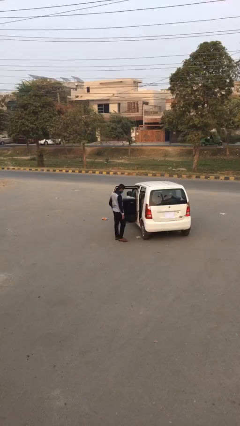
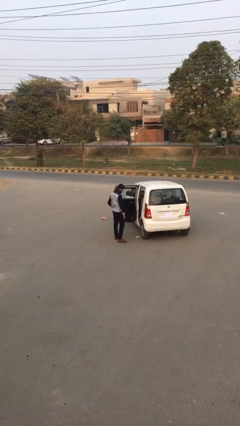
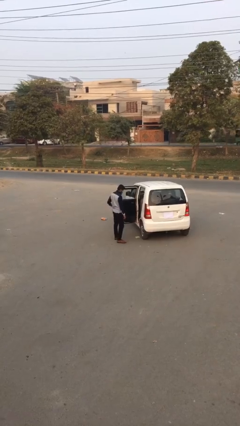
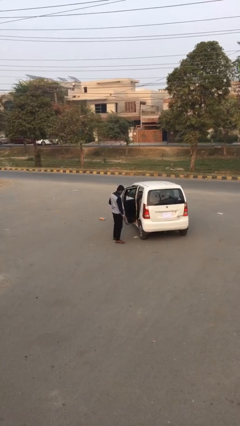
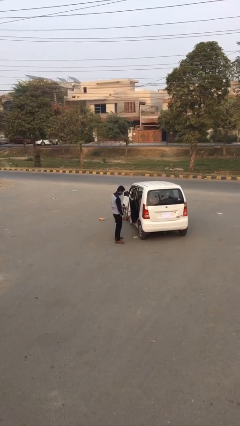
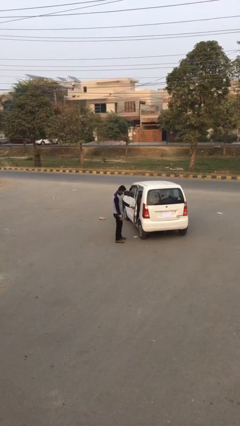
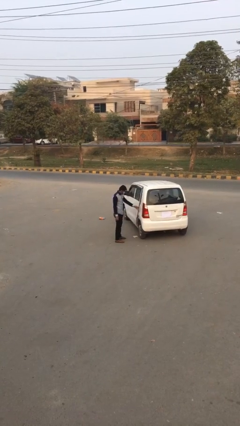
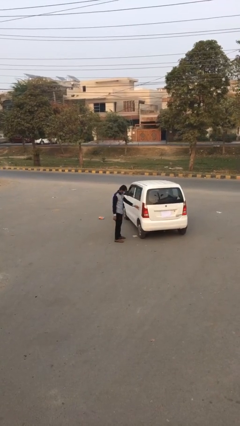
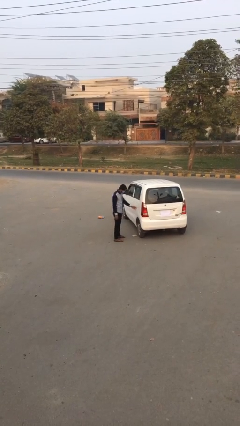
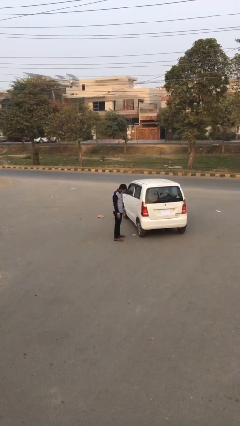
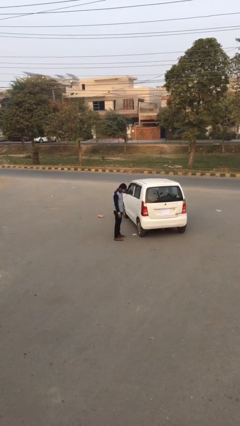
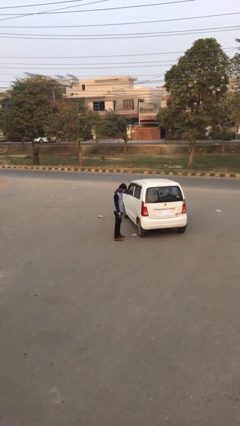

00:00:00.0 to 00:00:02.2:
person closes car door

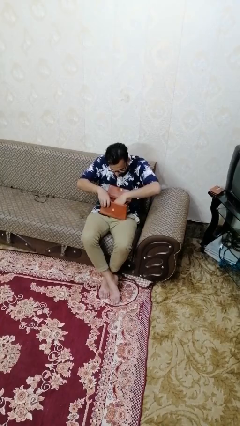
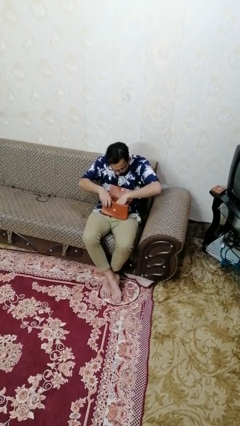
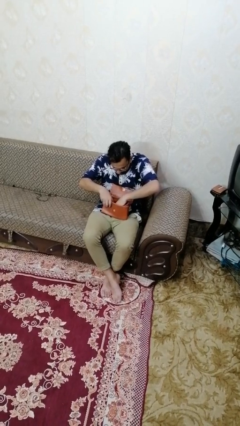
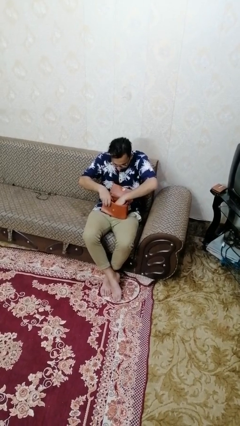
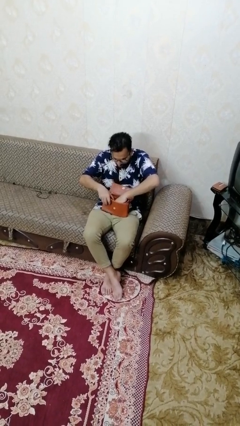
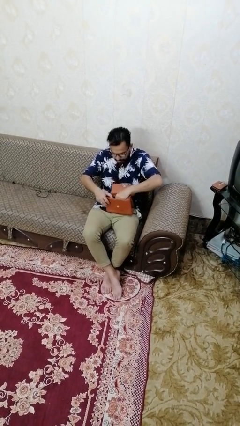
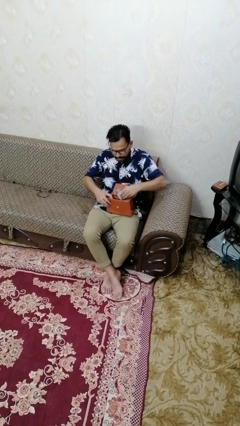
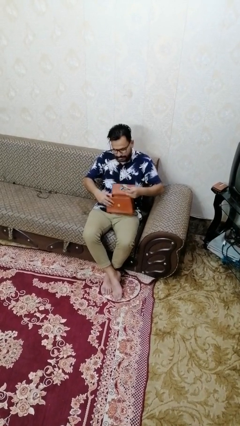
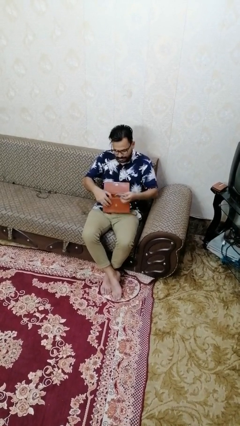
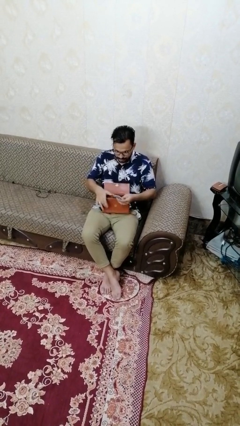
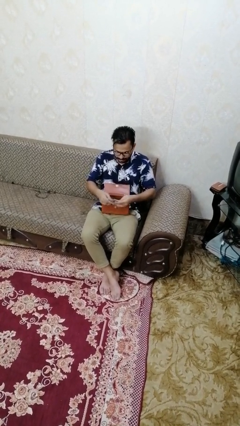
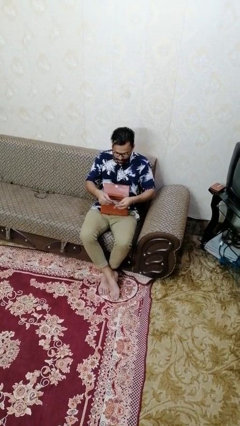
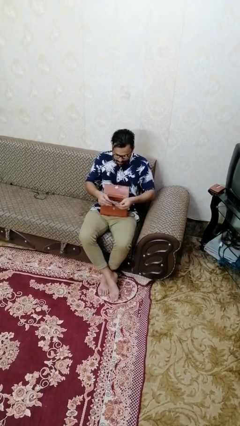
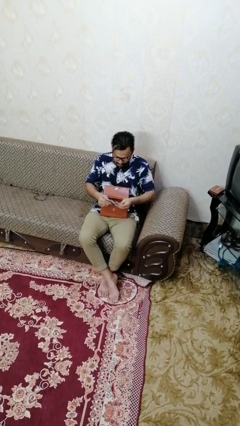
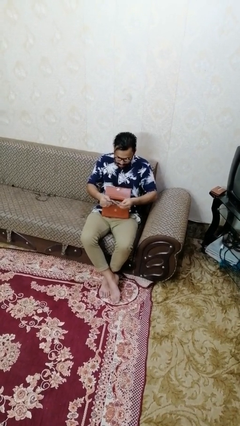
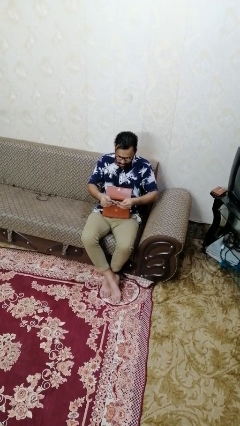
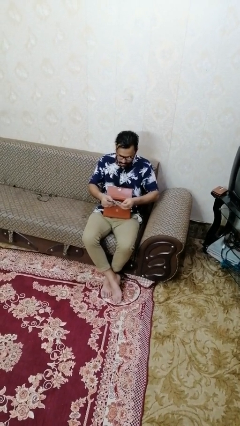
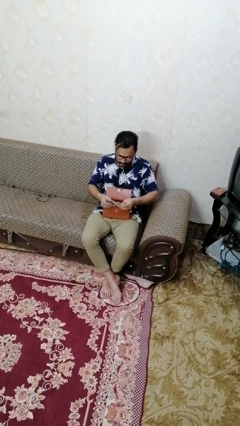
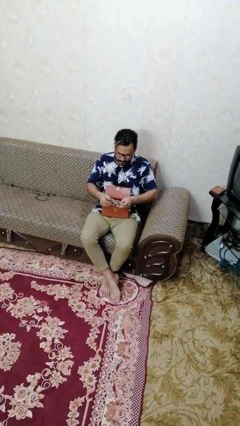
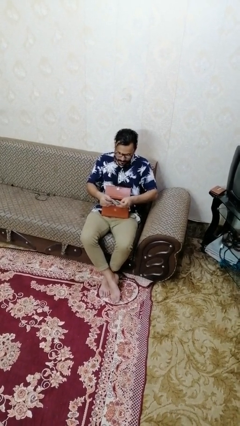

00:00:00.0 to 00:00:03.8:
person takes object from purse

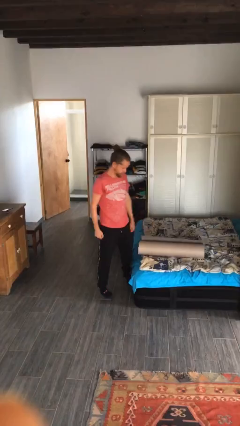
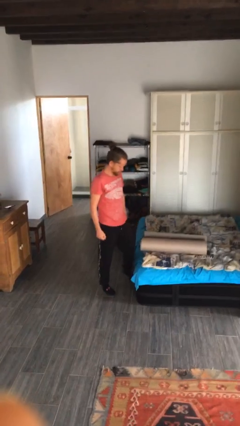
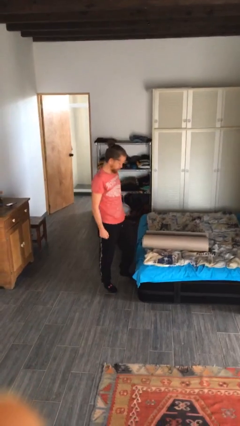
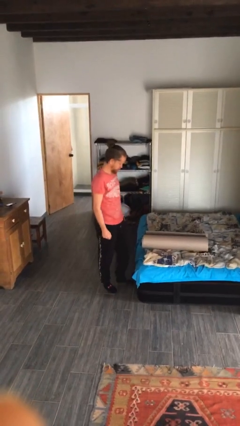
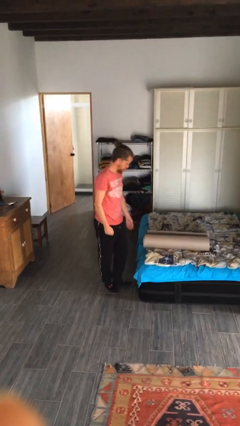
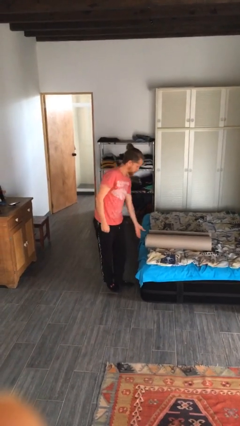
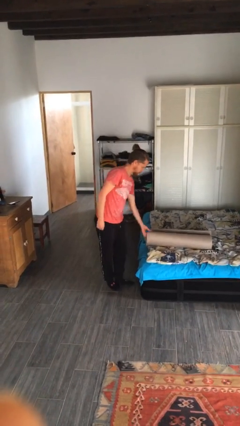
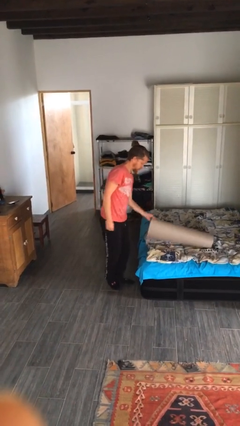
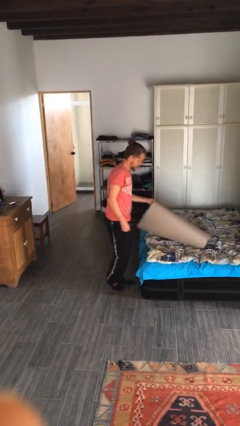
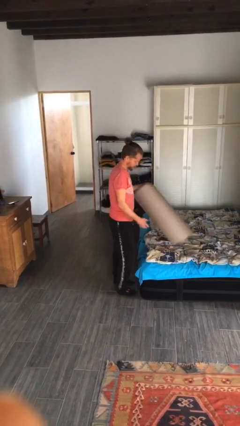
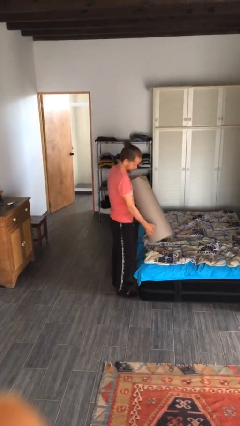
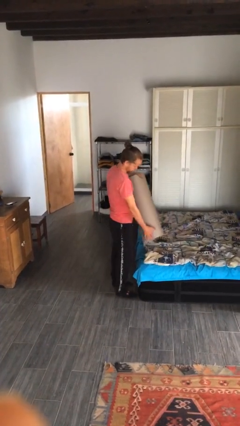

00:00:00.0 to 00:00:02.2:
person picks up object from bed

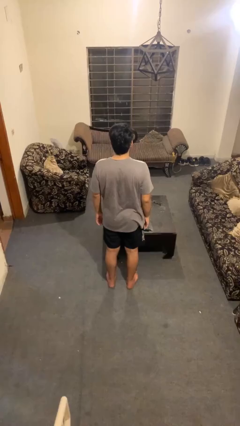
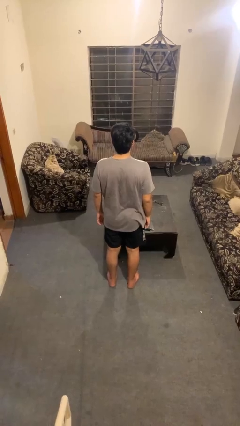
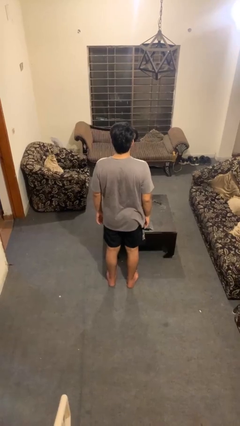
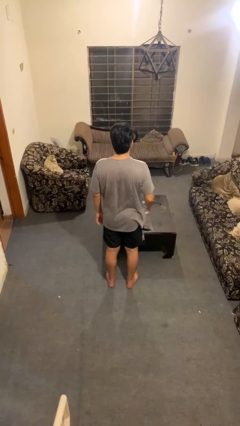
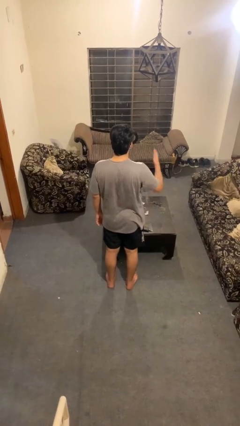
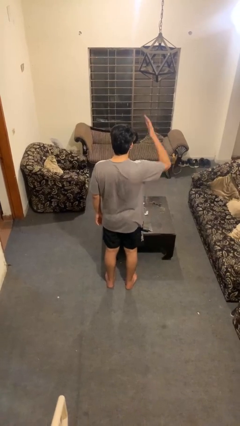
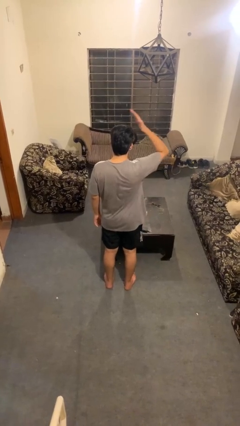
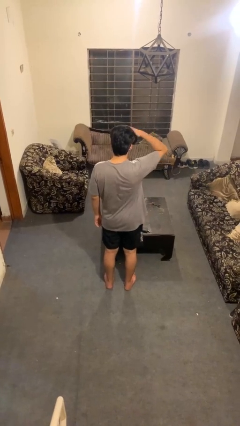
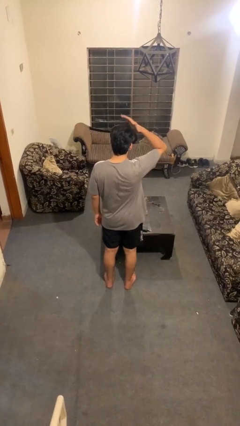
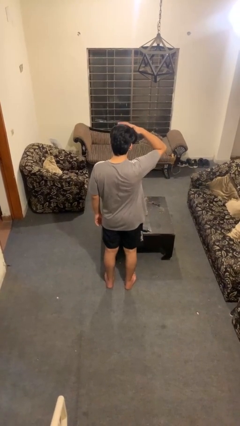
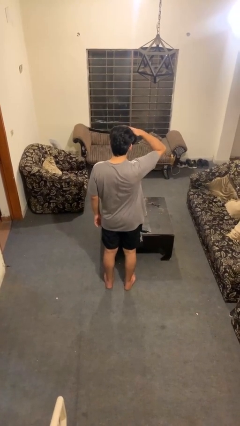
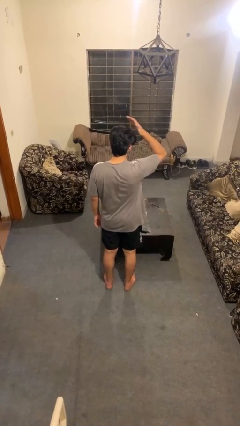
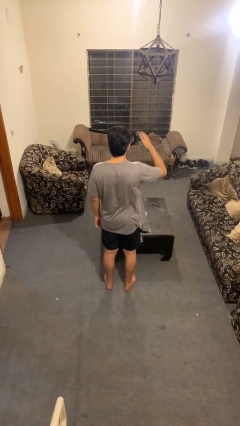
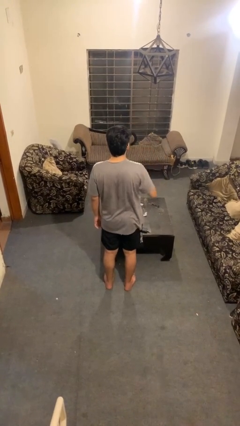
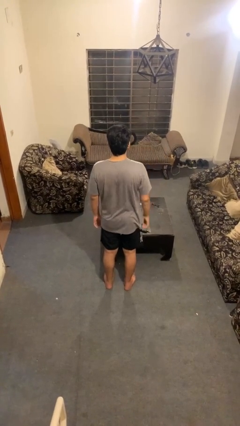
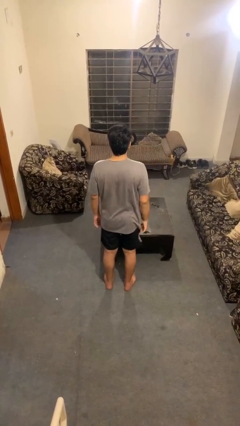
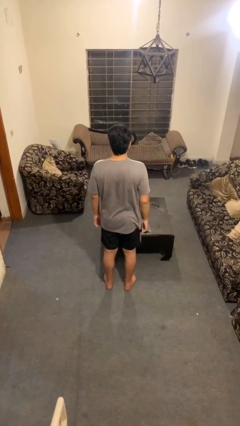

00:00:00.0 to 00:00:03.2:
person pats head

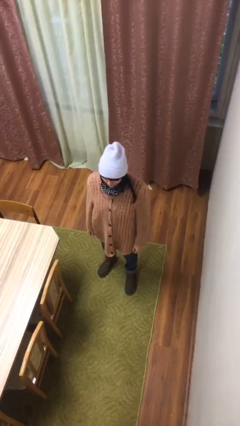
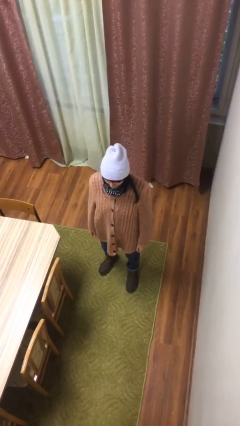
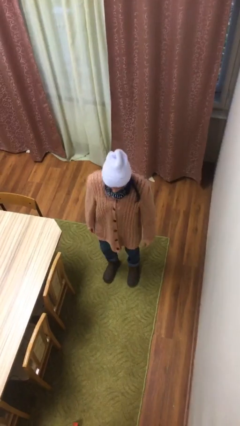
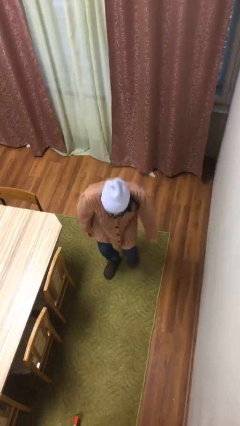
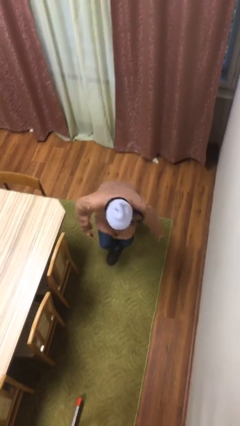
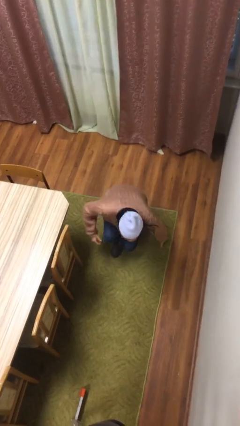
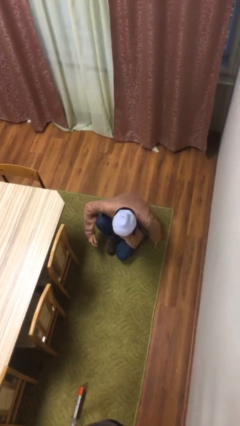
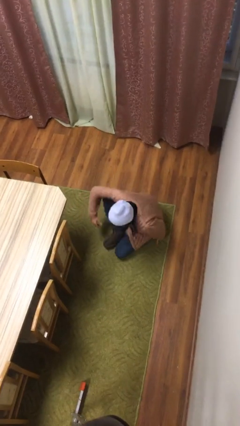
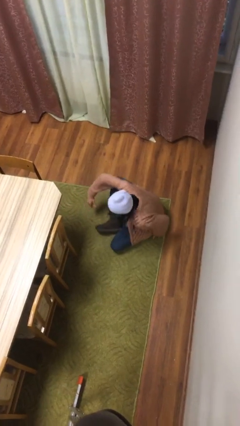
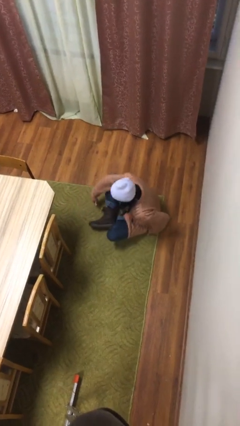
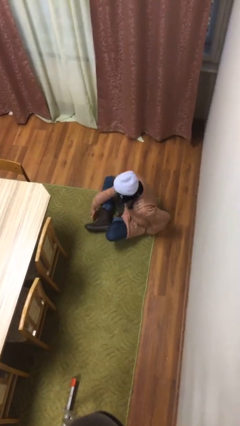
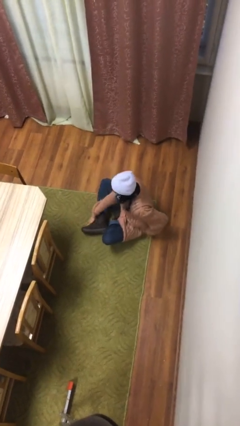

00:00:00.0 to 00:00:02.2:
person sits down

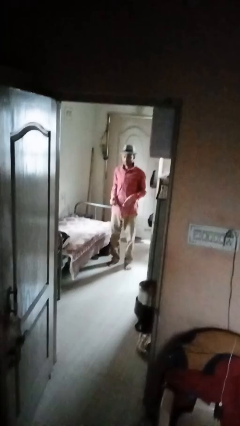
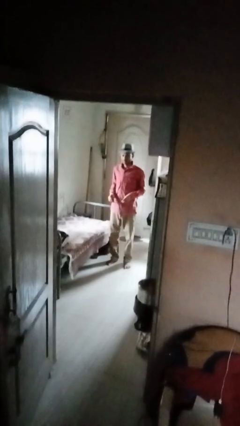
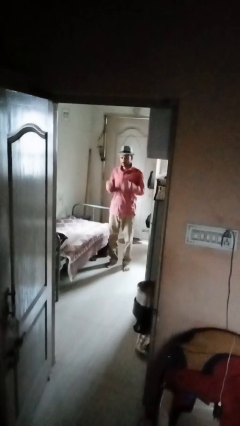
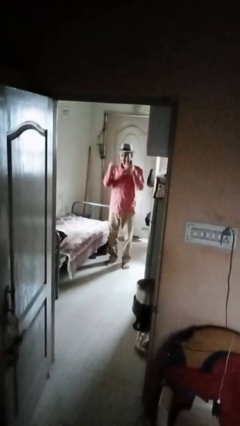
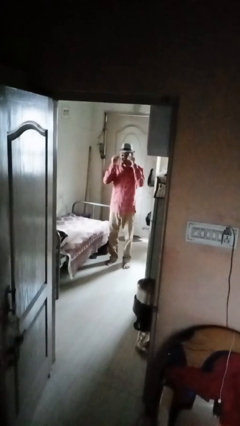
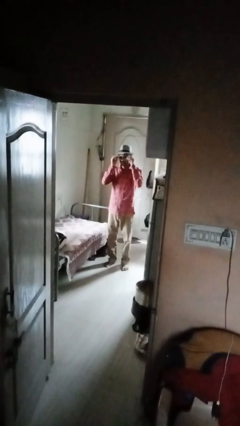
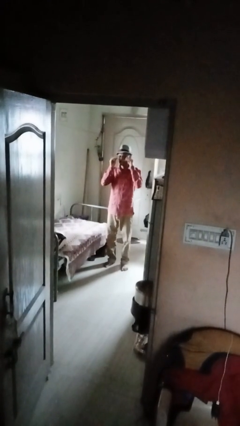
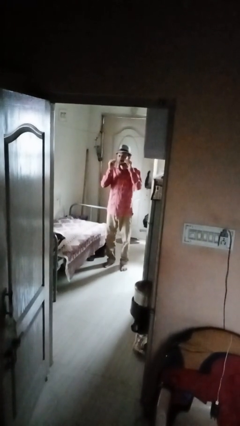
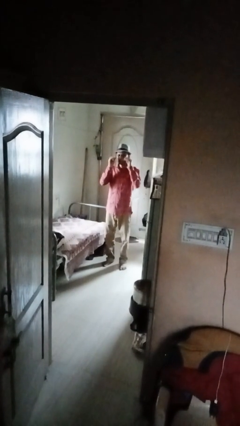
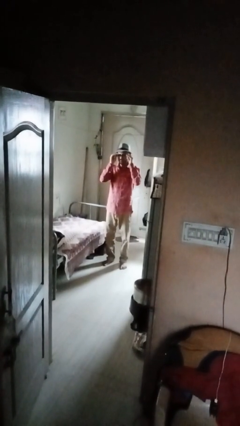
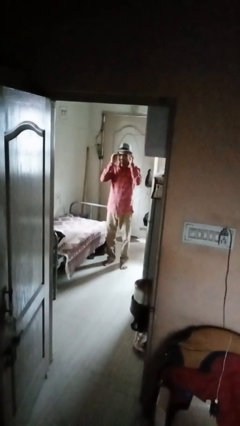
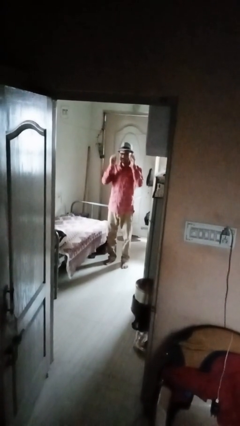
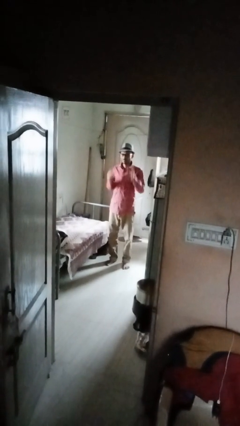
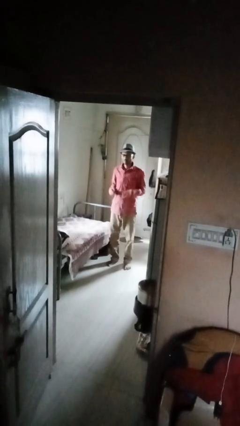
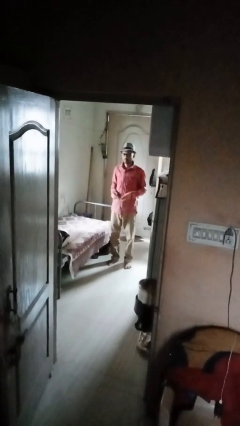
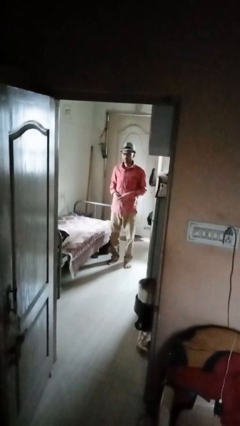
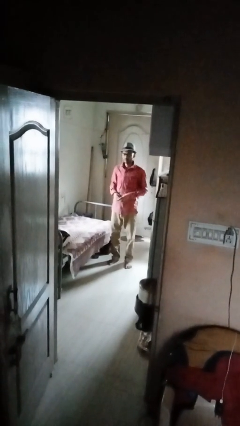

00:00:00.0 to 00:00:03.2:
person puts on glasses

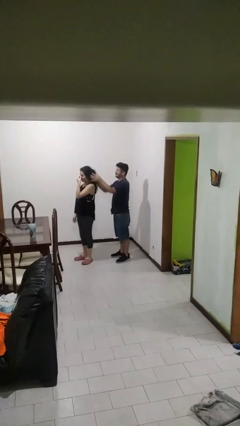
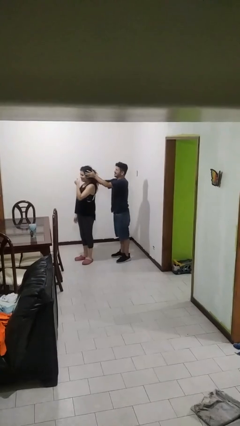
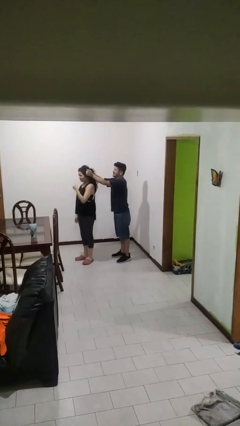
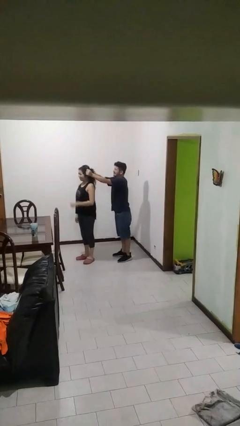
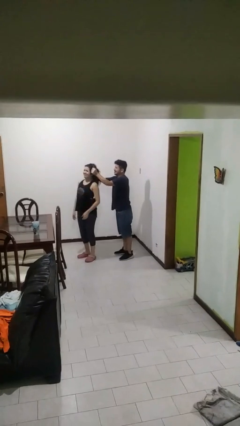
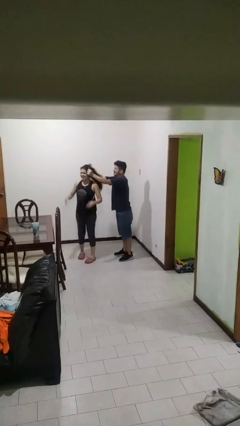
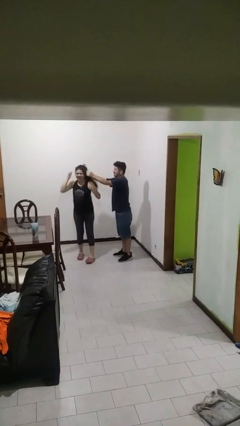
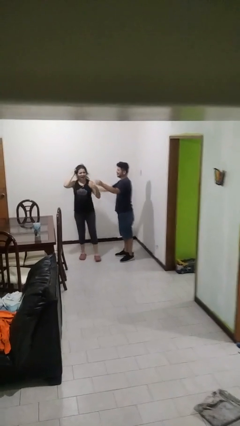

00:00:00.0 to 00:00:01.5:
person grabs person by hair
